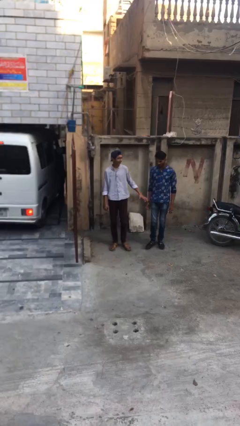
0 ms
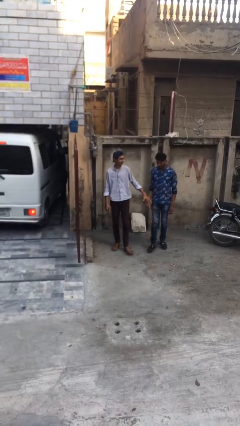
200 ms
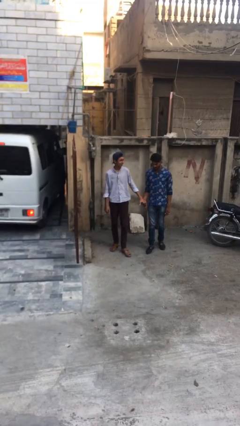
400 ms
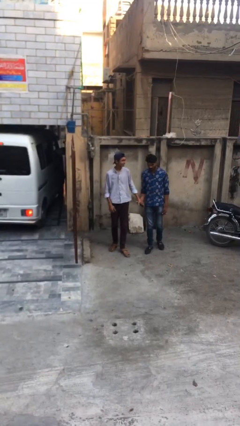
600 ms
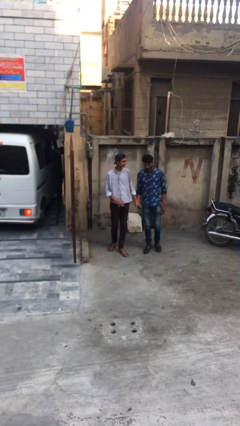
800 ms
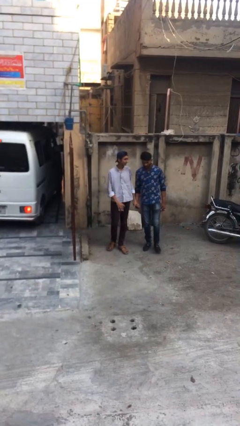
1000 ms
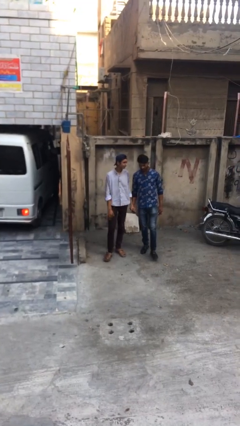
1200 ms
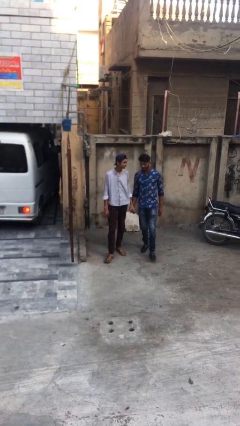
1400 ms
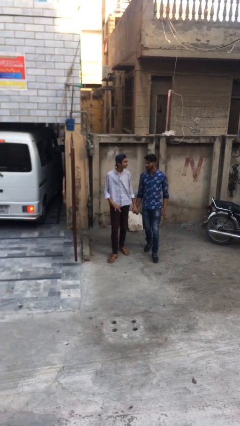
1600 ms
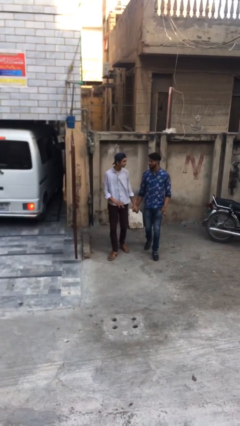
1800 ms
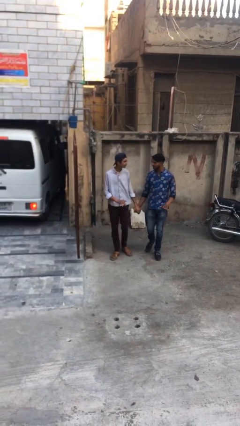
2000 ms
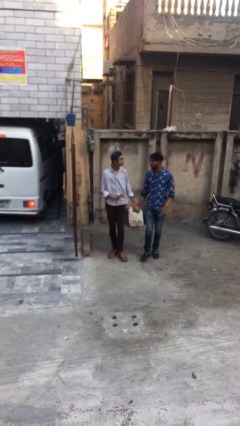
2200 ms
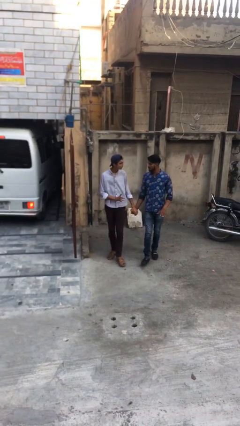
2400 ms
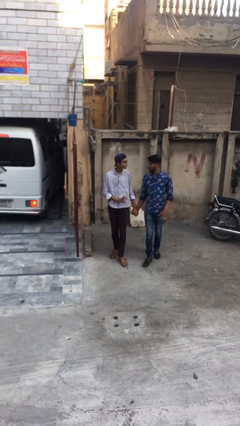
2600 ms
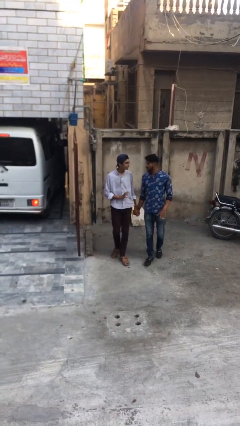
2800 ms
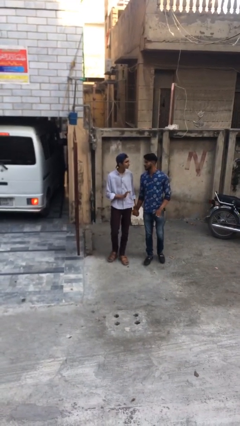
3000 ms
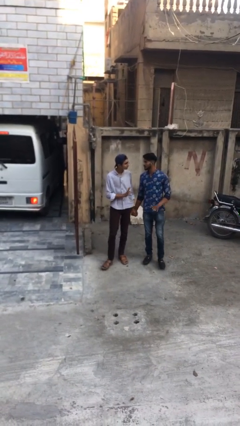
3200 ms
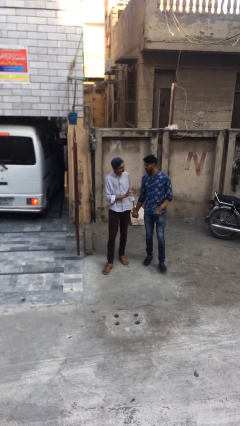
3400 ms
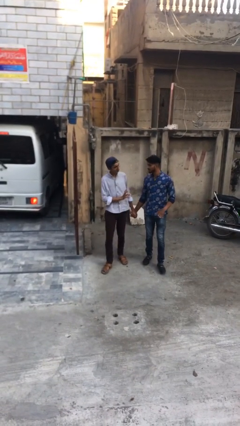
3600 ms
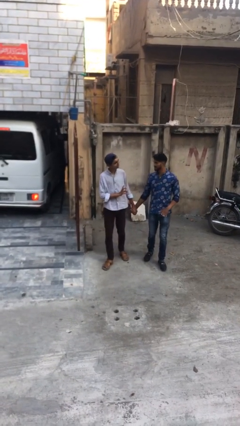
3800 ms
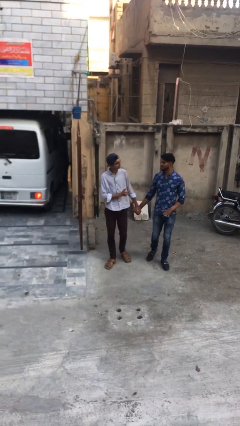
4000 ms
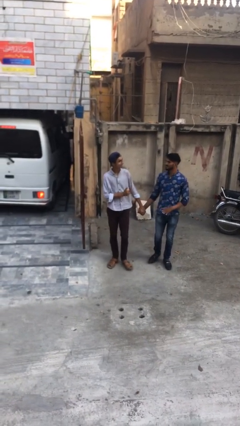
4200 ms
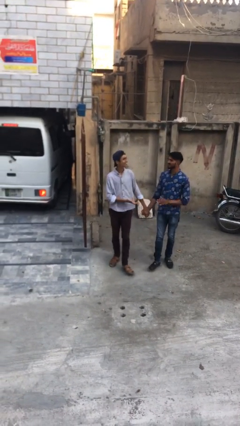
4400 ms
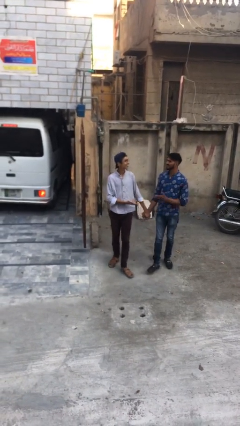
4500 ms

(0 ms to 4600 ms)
person holds hand

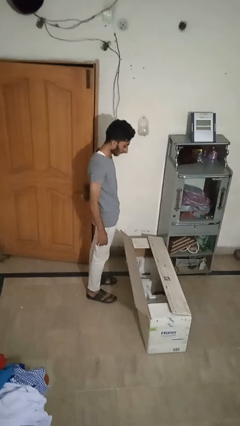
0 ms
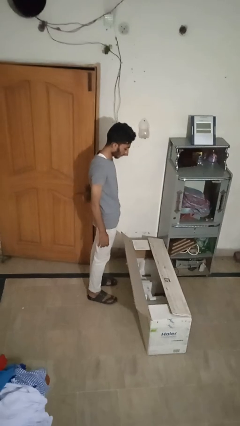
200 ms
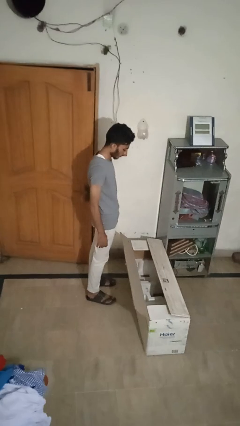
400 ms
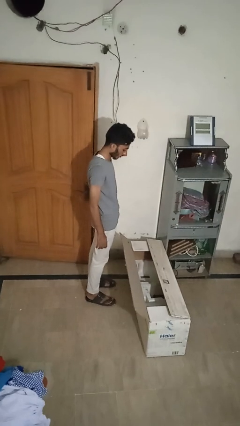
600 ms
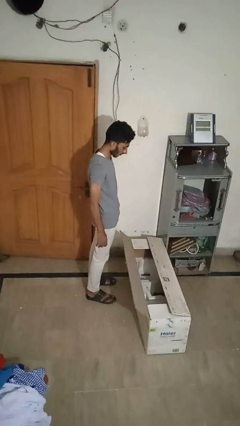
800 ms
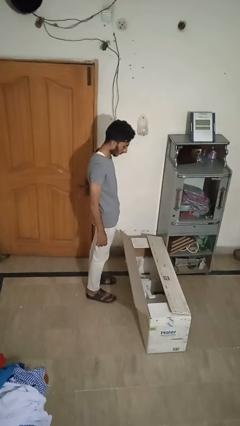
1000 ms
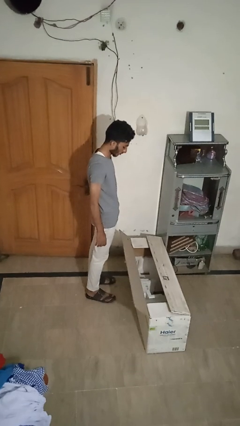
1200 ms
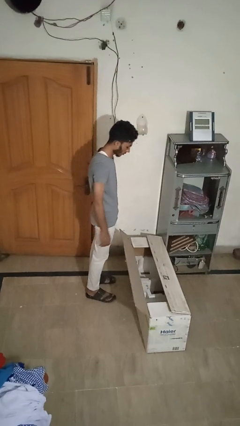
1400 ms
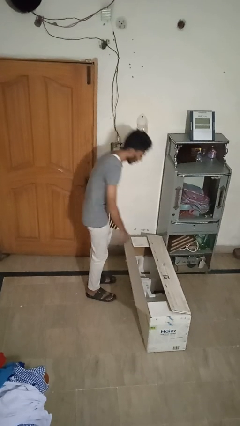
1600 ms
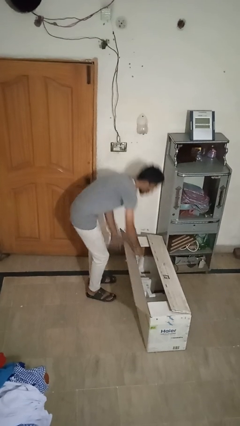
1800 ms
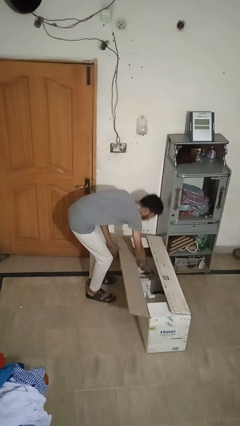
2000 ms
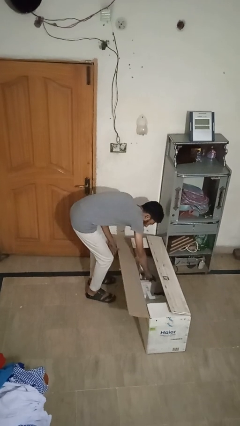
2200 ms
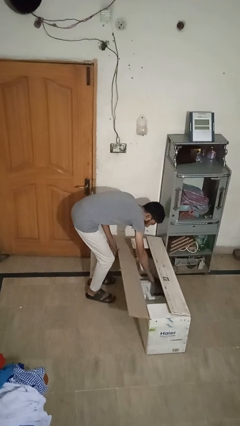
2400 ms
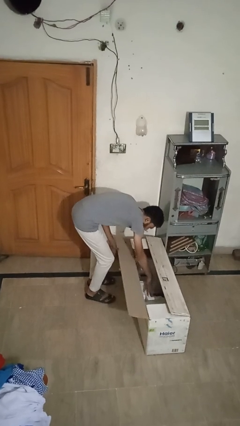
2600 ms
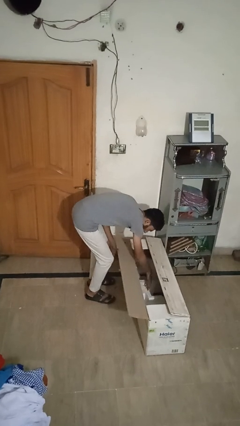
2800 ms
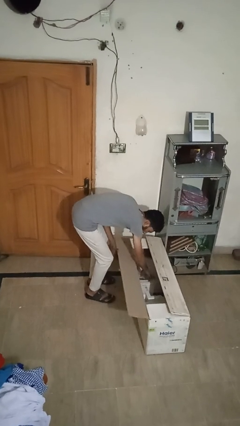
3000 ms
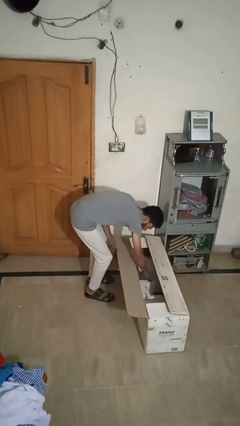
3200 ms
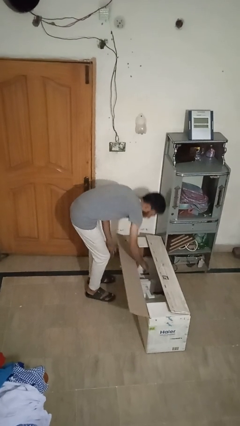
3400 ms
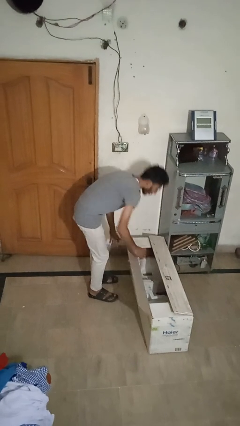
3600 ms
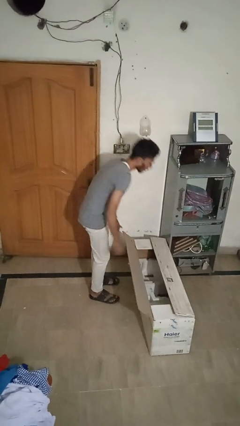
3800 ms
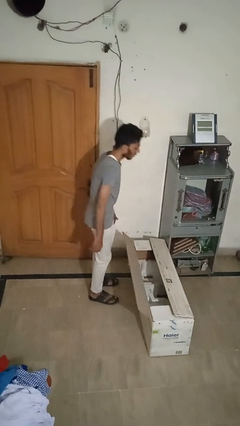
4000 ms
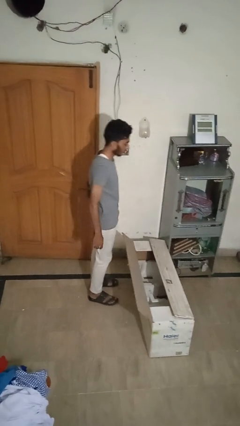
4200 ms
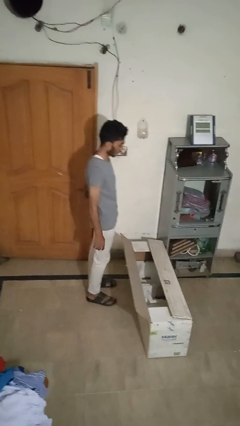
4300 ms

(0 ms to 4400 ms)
person searches in box

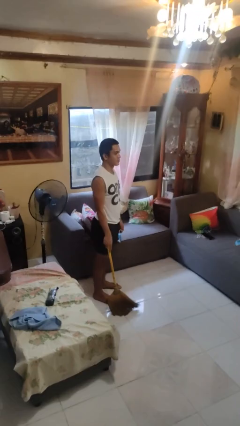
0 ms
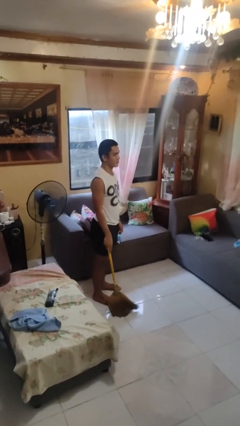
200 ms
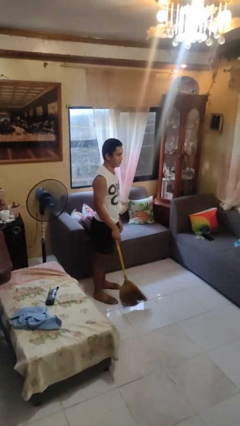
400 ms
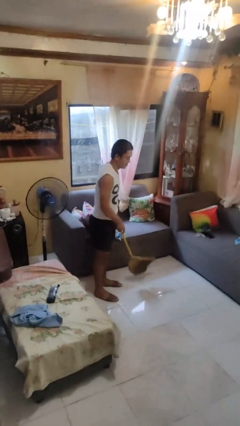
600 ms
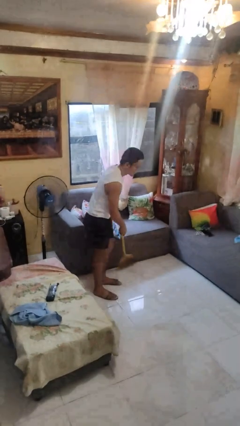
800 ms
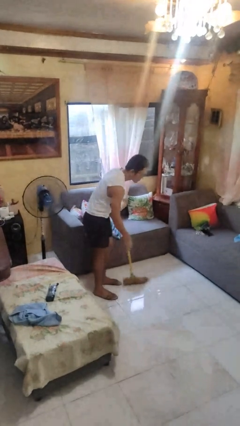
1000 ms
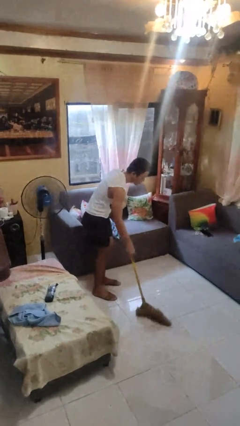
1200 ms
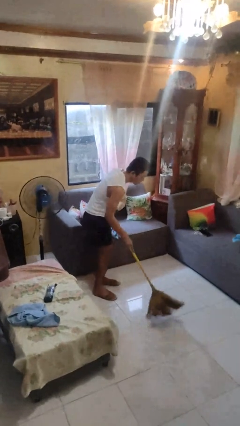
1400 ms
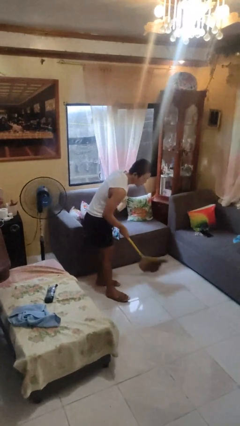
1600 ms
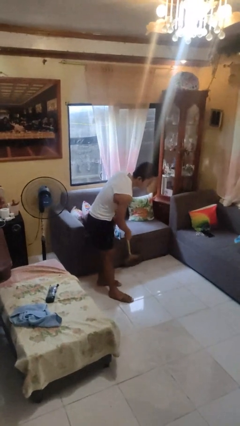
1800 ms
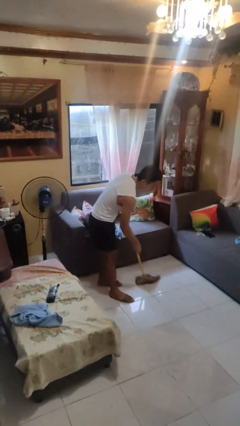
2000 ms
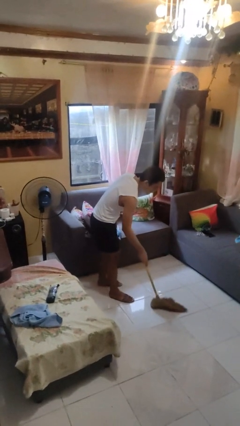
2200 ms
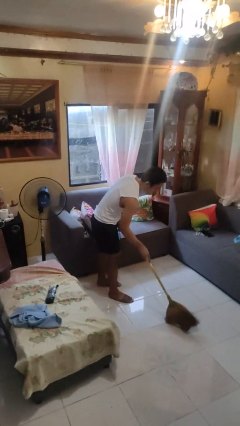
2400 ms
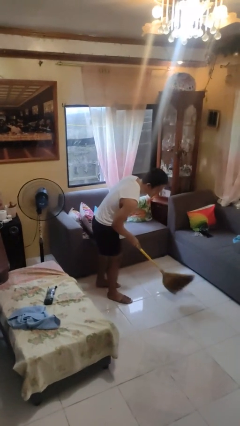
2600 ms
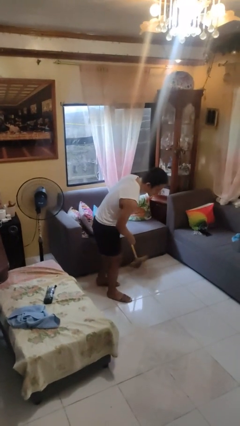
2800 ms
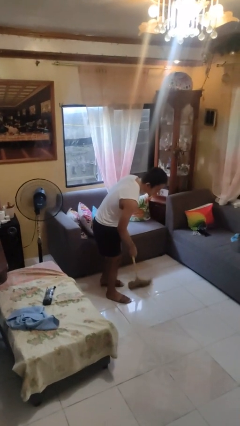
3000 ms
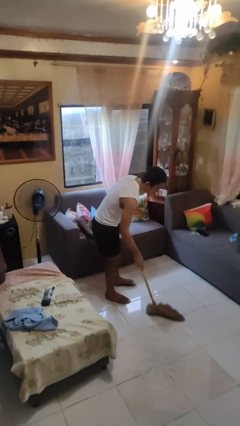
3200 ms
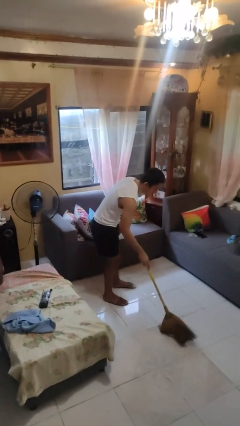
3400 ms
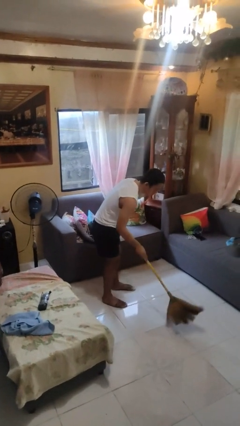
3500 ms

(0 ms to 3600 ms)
person sweeps floor

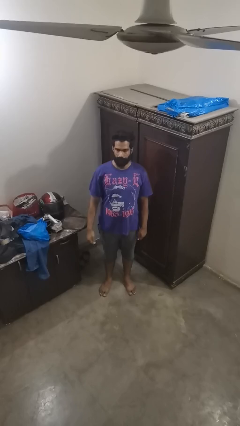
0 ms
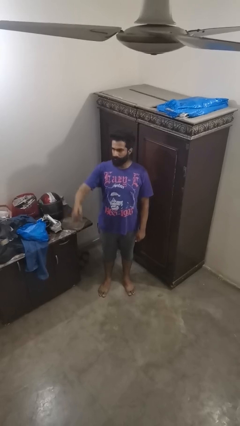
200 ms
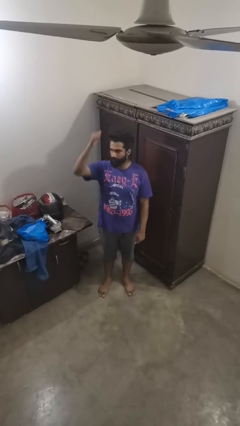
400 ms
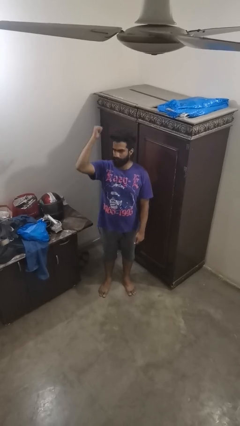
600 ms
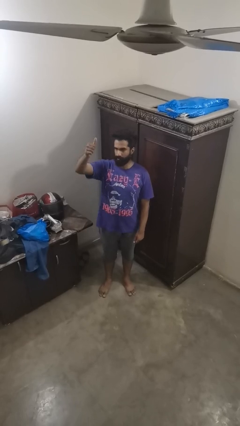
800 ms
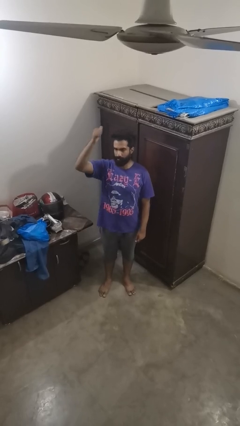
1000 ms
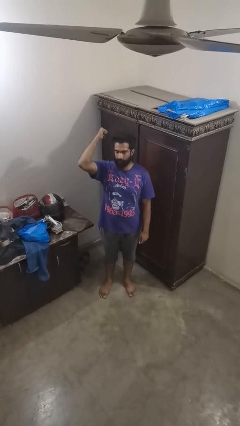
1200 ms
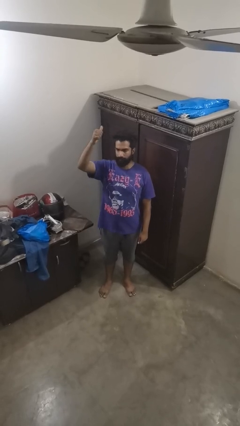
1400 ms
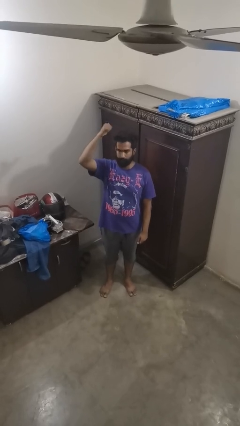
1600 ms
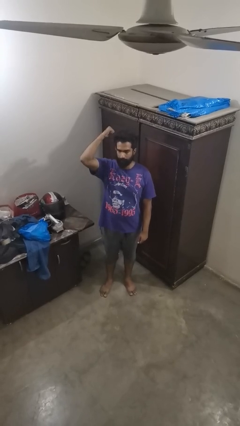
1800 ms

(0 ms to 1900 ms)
person gestures behind me

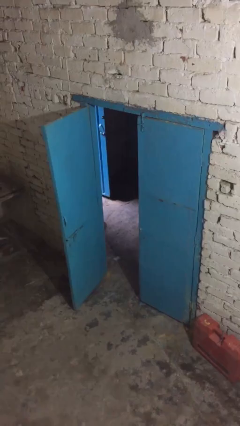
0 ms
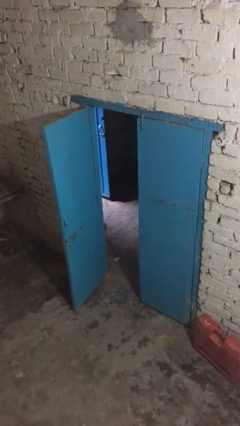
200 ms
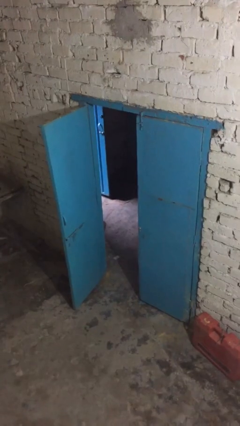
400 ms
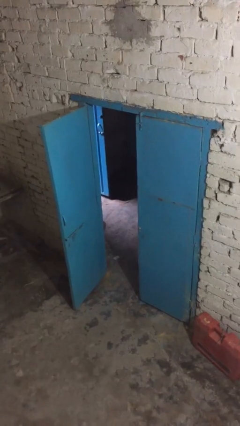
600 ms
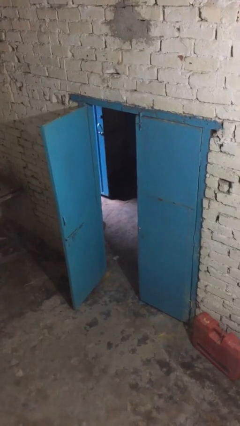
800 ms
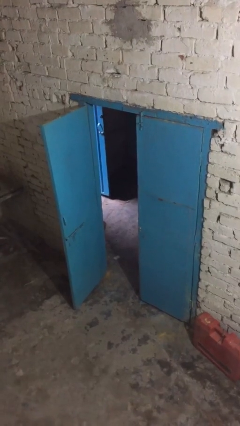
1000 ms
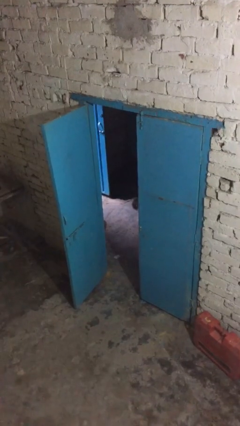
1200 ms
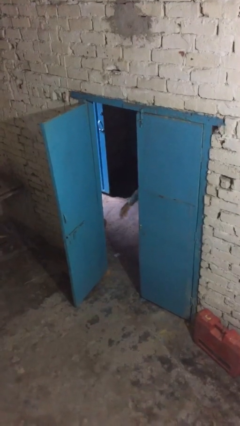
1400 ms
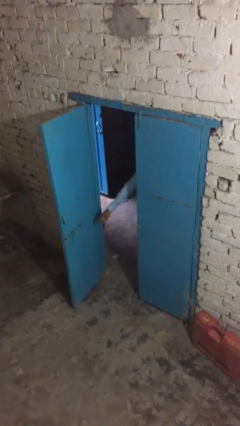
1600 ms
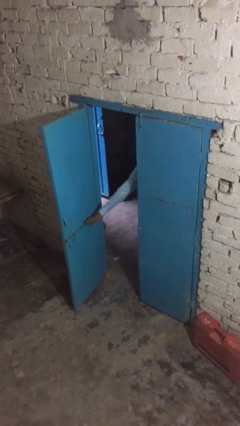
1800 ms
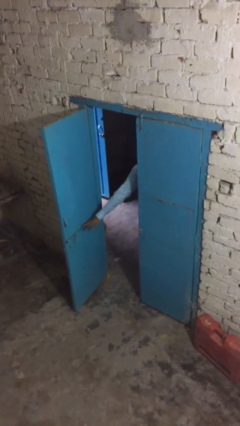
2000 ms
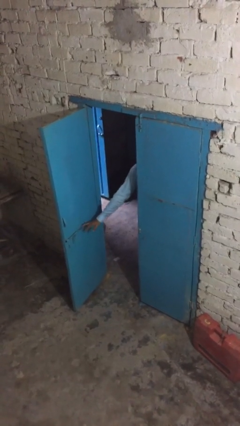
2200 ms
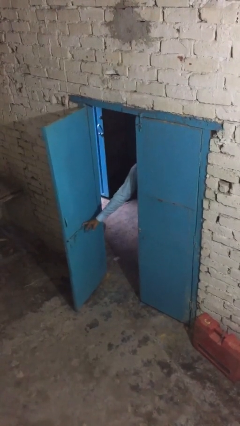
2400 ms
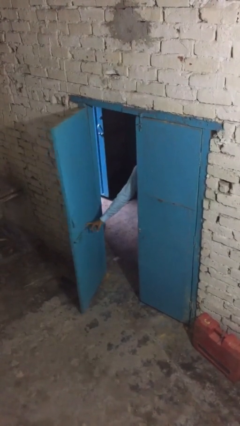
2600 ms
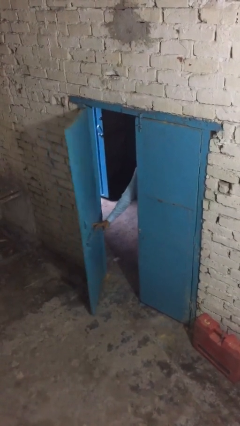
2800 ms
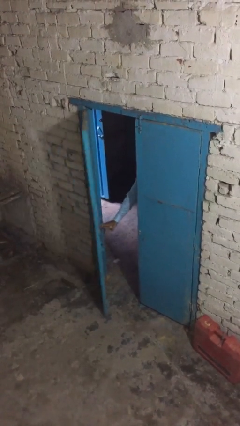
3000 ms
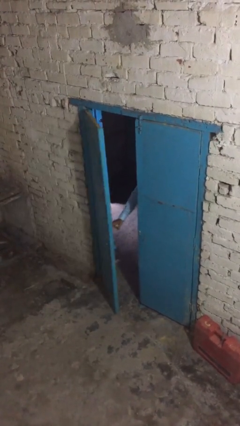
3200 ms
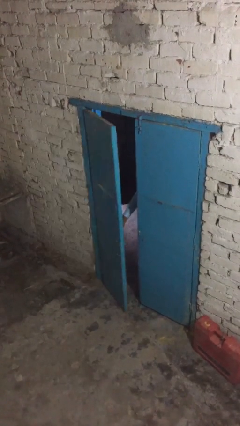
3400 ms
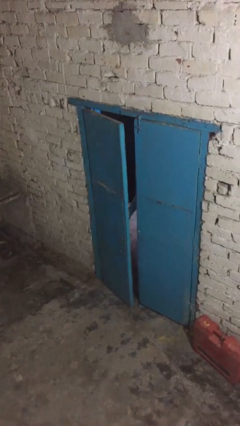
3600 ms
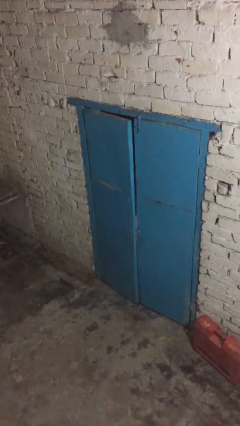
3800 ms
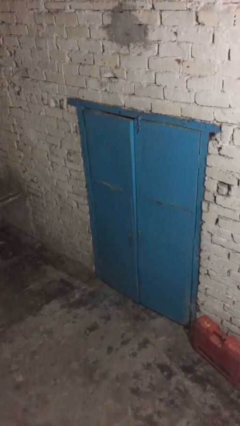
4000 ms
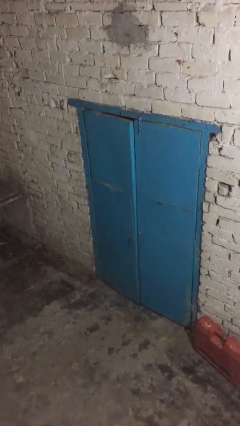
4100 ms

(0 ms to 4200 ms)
person closes facility door
